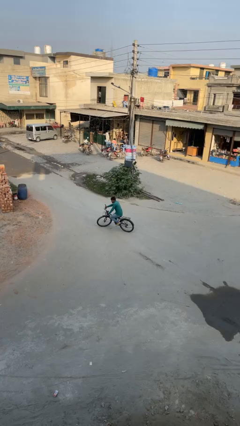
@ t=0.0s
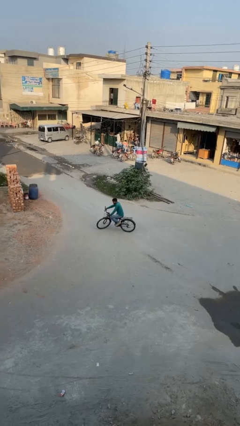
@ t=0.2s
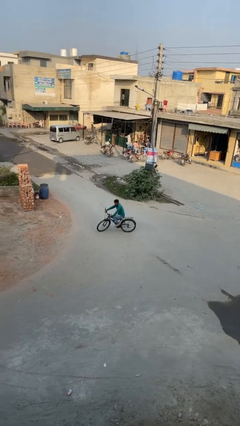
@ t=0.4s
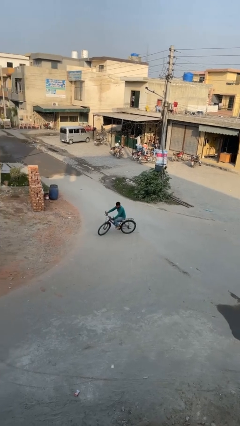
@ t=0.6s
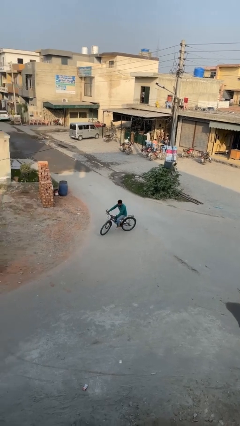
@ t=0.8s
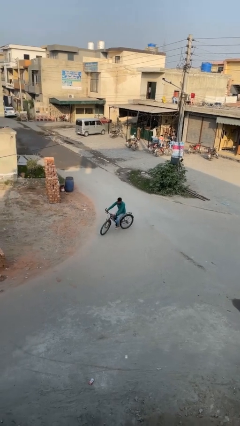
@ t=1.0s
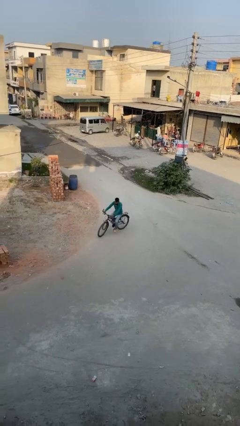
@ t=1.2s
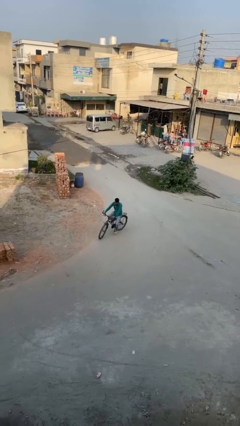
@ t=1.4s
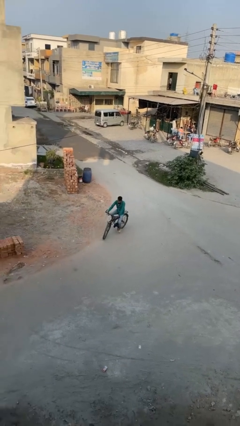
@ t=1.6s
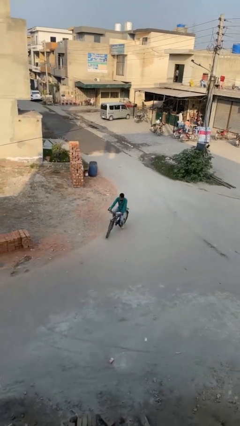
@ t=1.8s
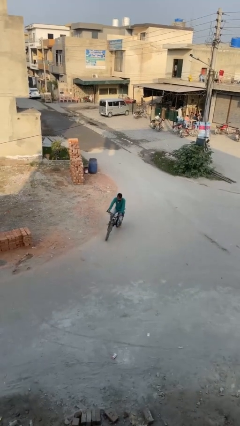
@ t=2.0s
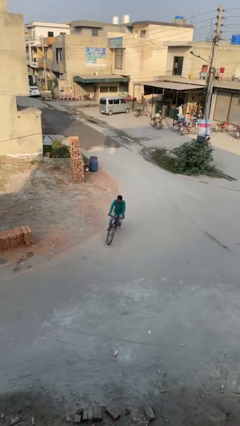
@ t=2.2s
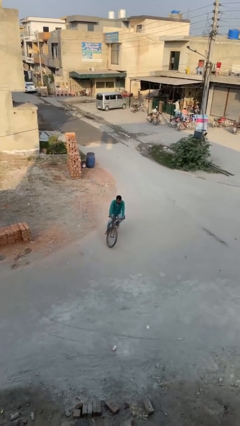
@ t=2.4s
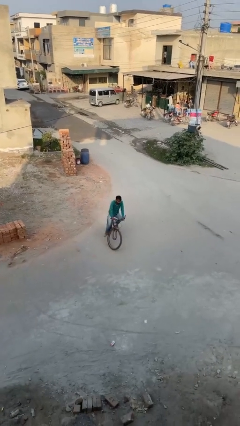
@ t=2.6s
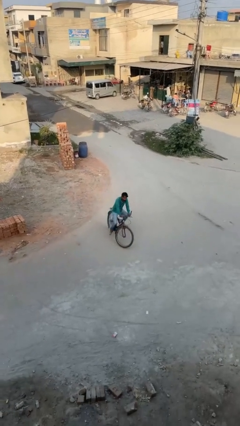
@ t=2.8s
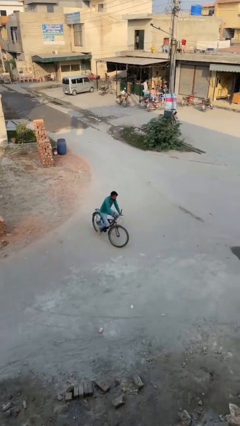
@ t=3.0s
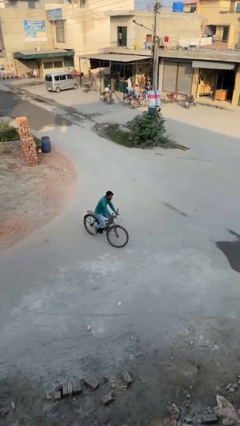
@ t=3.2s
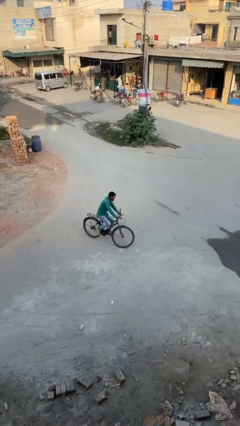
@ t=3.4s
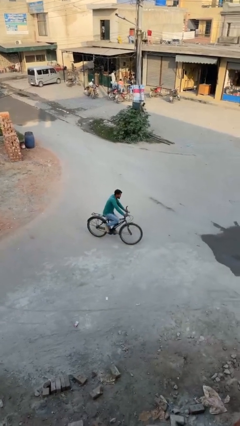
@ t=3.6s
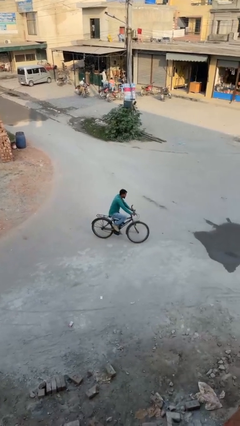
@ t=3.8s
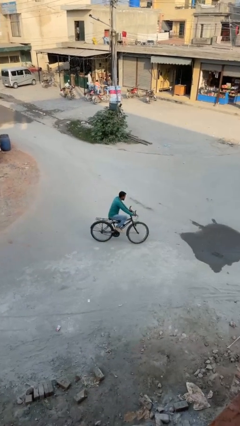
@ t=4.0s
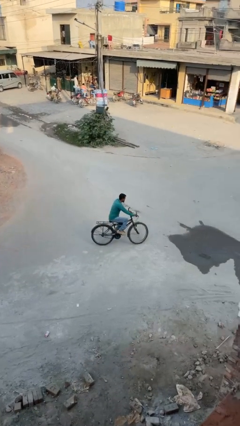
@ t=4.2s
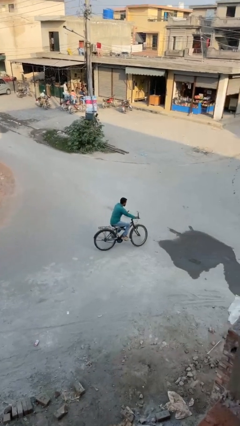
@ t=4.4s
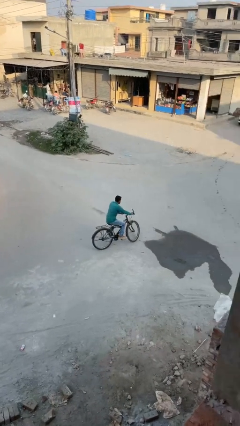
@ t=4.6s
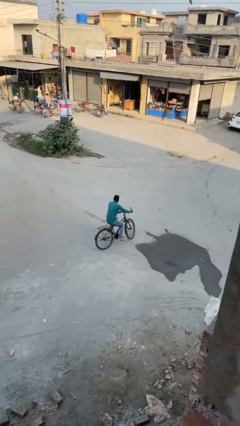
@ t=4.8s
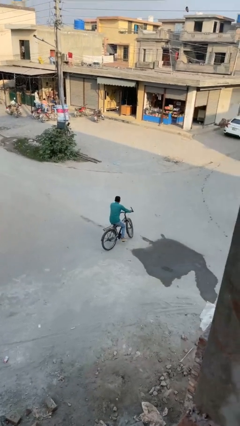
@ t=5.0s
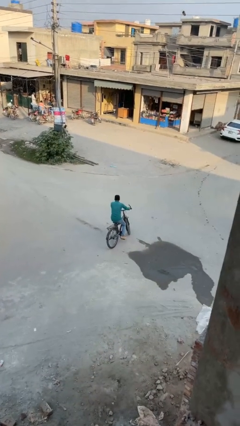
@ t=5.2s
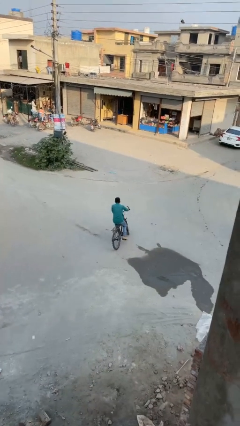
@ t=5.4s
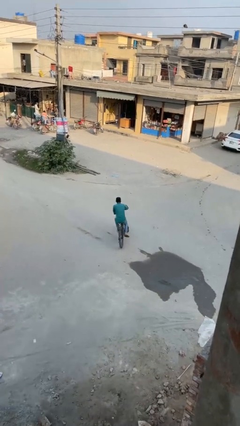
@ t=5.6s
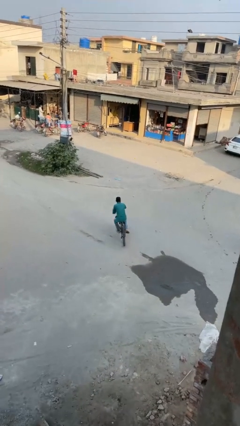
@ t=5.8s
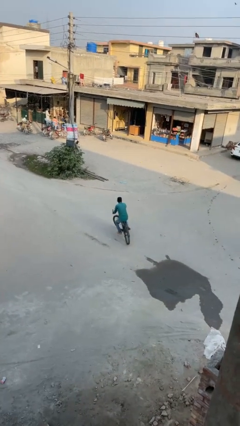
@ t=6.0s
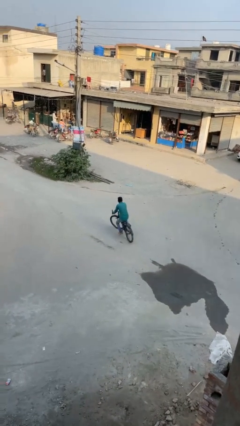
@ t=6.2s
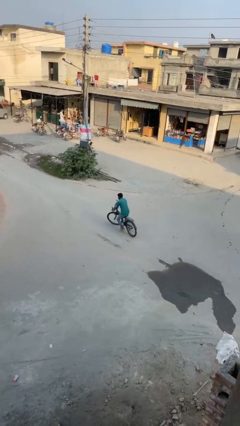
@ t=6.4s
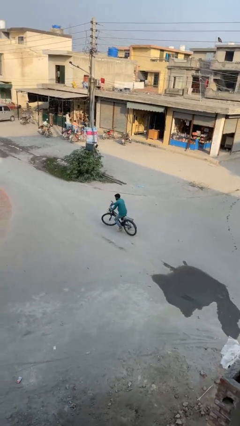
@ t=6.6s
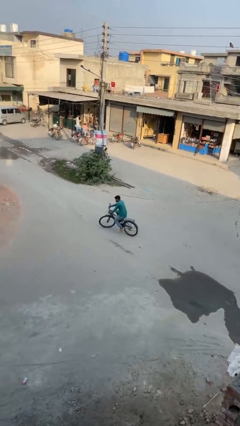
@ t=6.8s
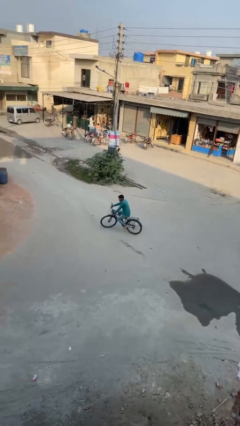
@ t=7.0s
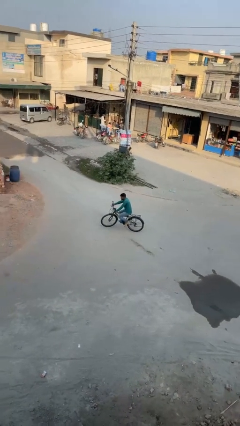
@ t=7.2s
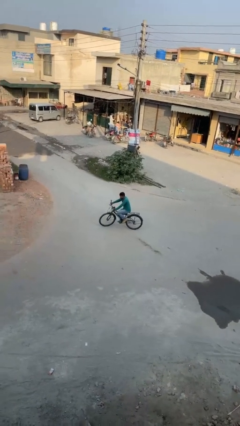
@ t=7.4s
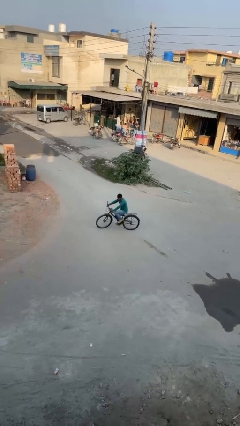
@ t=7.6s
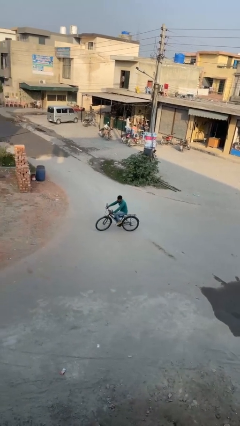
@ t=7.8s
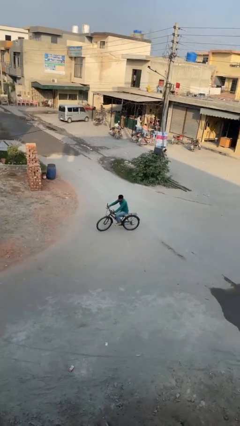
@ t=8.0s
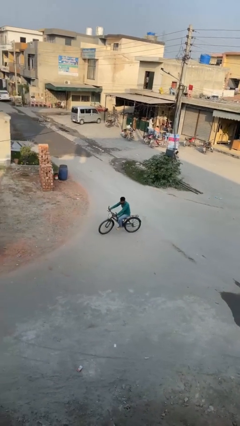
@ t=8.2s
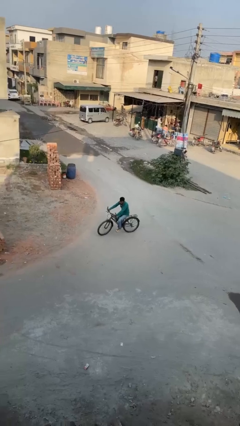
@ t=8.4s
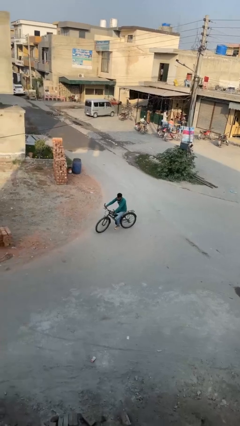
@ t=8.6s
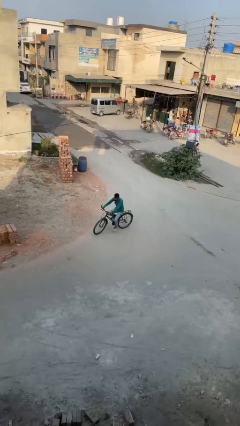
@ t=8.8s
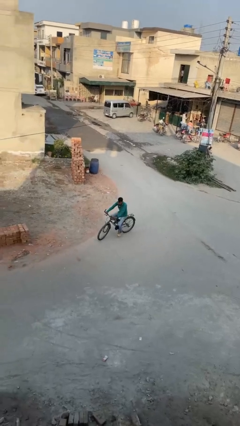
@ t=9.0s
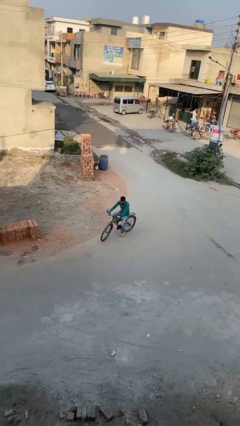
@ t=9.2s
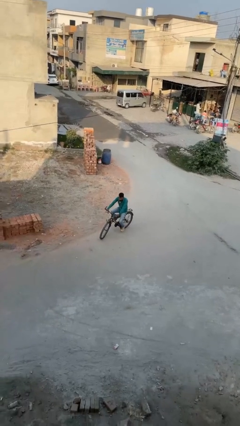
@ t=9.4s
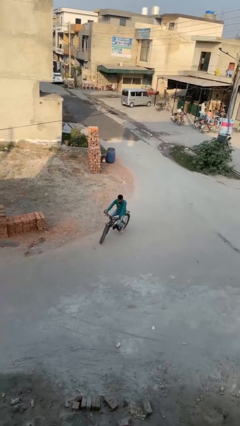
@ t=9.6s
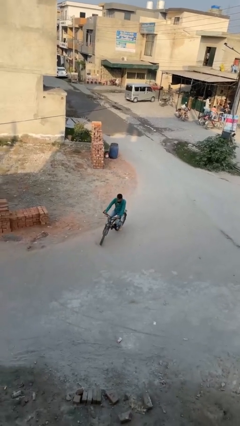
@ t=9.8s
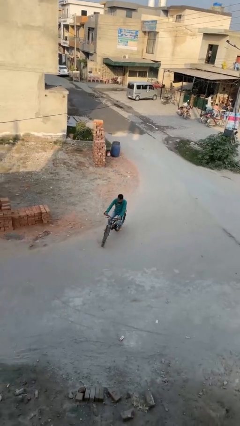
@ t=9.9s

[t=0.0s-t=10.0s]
person rides bicycle

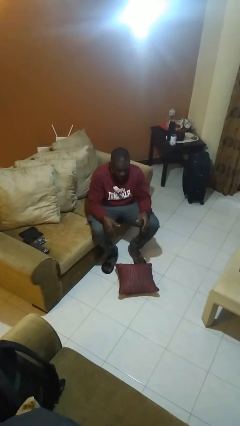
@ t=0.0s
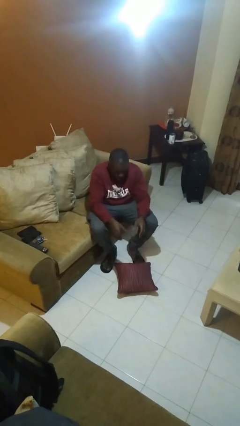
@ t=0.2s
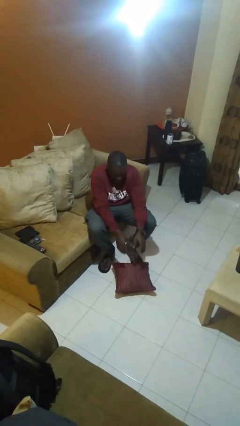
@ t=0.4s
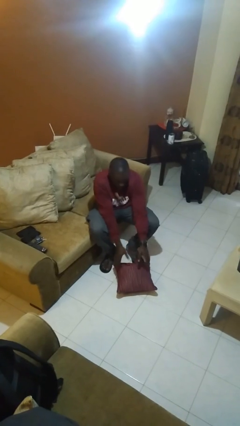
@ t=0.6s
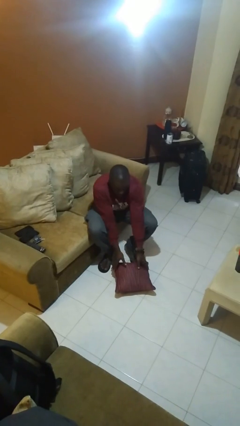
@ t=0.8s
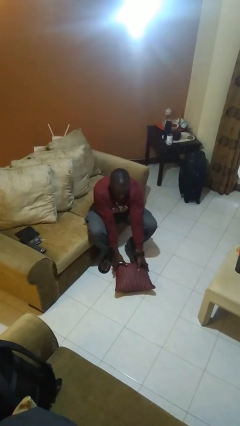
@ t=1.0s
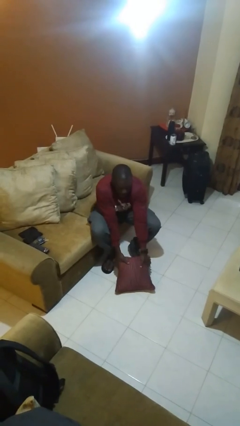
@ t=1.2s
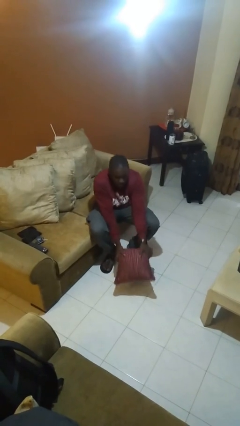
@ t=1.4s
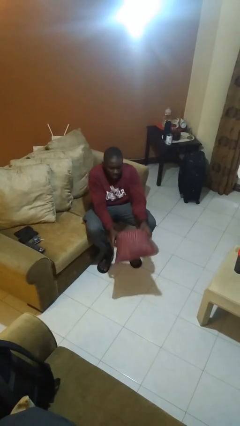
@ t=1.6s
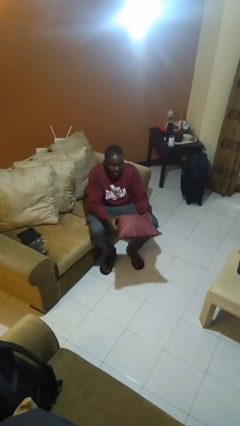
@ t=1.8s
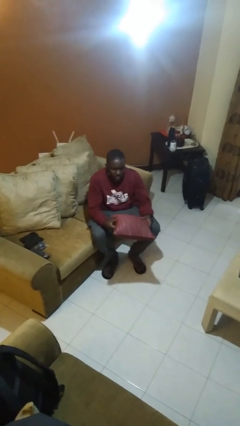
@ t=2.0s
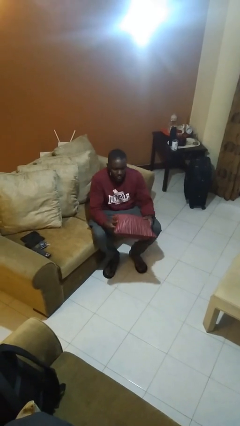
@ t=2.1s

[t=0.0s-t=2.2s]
person picks up object from floor

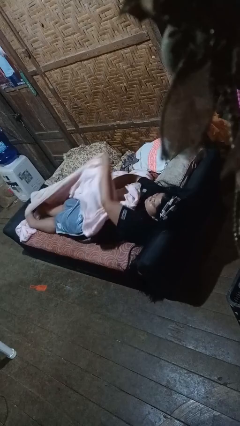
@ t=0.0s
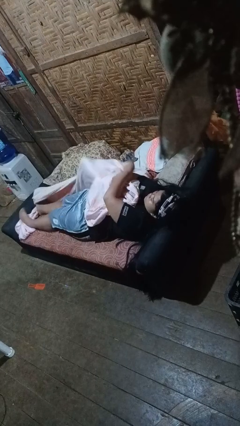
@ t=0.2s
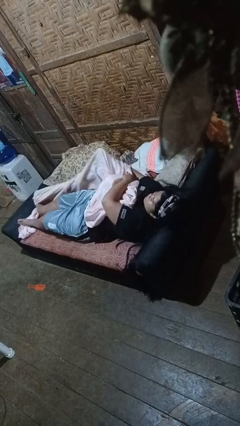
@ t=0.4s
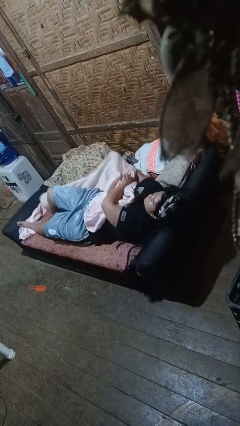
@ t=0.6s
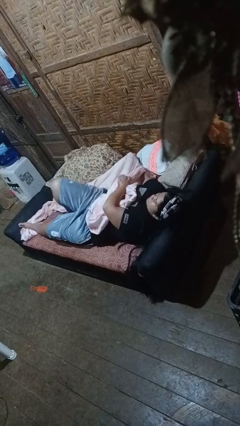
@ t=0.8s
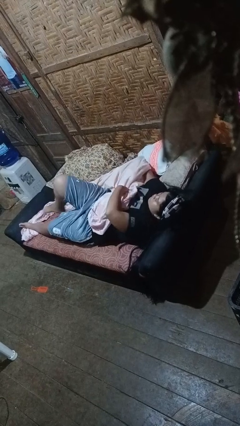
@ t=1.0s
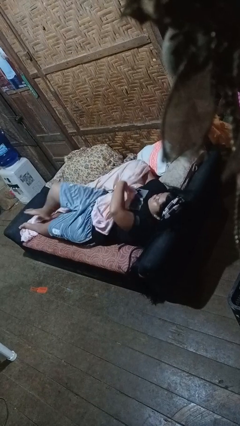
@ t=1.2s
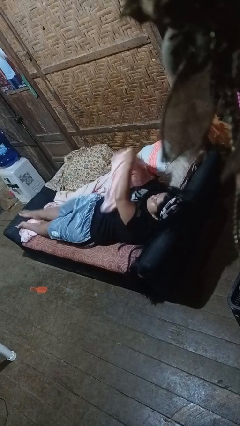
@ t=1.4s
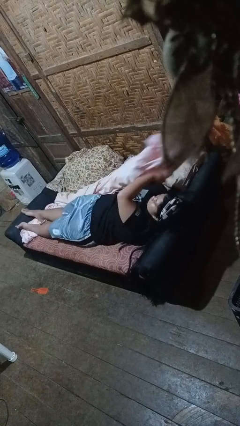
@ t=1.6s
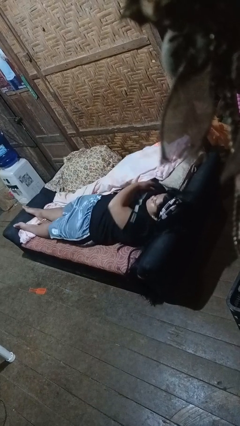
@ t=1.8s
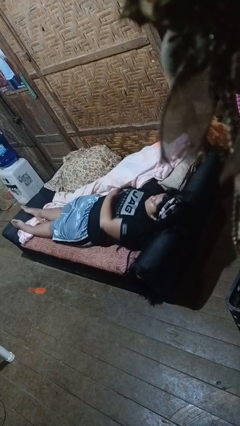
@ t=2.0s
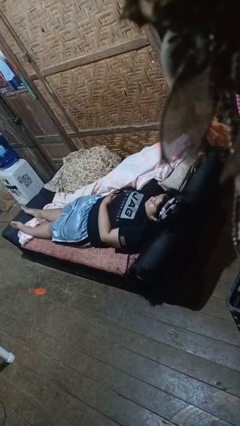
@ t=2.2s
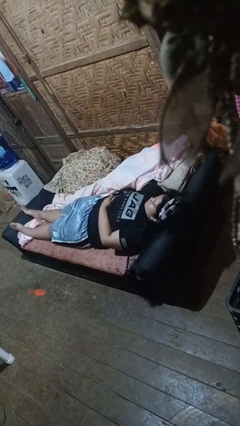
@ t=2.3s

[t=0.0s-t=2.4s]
person uncovers with bedsheets

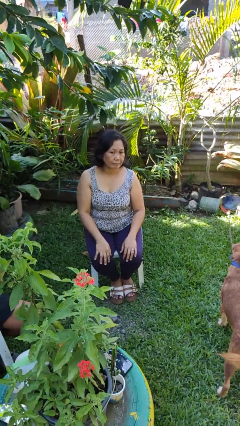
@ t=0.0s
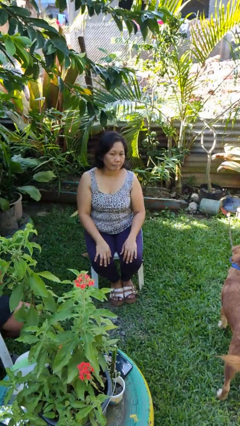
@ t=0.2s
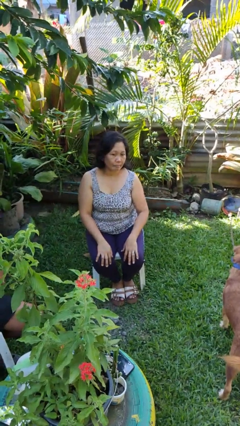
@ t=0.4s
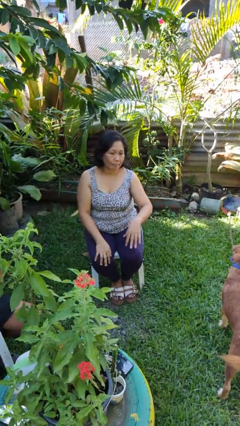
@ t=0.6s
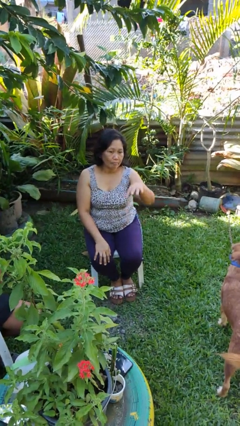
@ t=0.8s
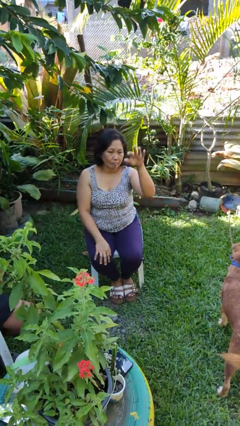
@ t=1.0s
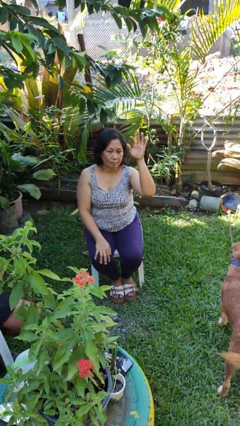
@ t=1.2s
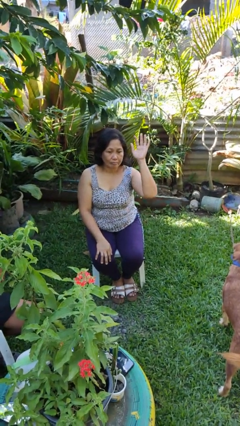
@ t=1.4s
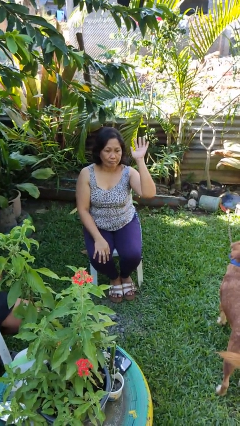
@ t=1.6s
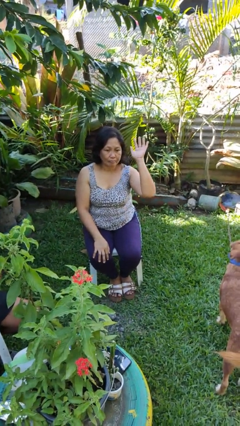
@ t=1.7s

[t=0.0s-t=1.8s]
person gestures raise hand

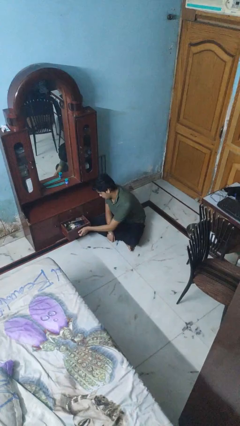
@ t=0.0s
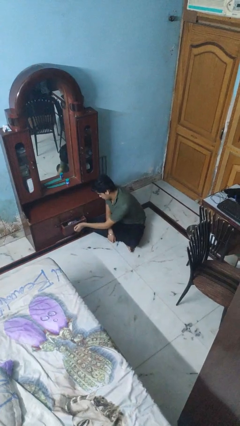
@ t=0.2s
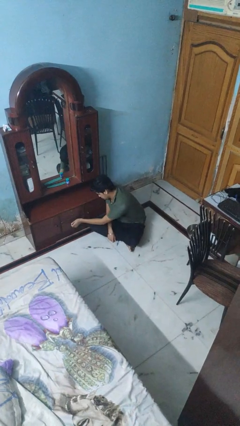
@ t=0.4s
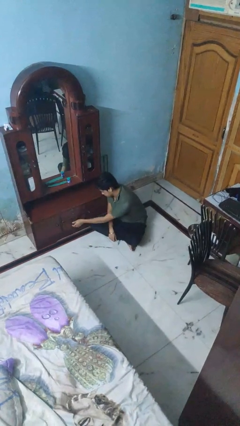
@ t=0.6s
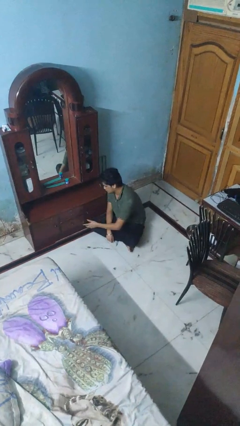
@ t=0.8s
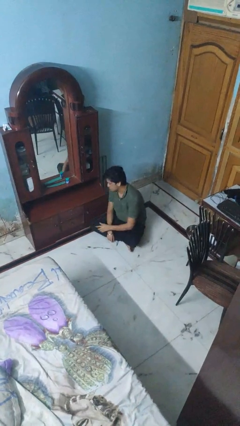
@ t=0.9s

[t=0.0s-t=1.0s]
person closes dresser drawer
